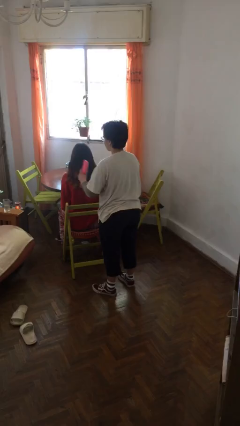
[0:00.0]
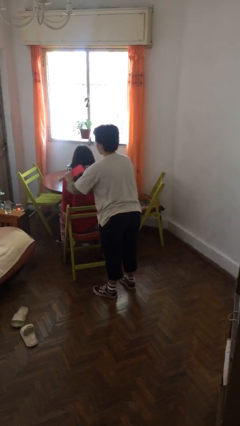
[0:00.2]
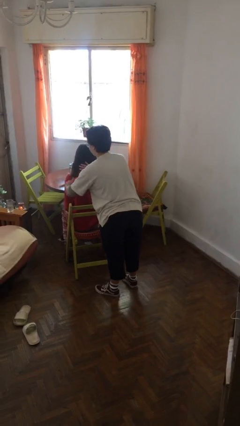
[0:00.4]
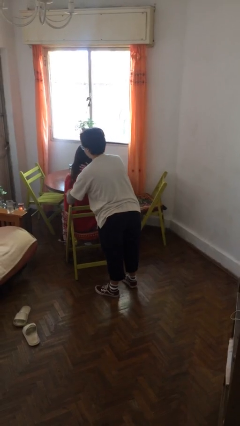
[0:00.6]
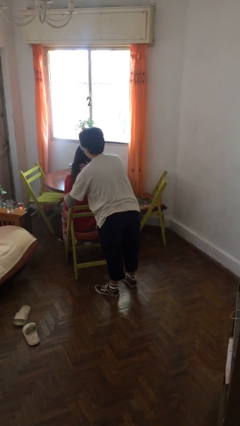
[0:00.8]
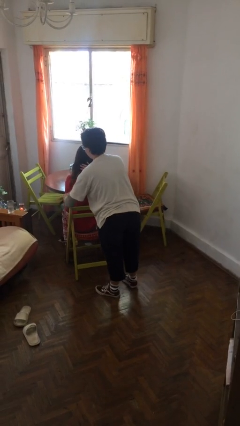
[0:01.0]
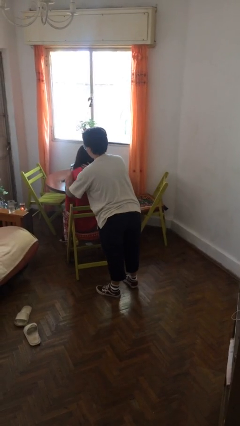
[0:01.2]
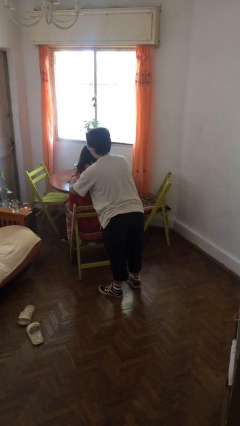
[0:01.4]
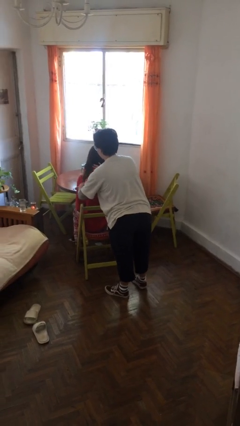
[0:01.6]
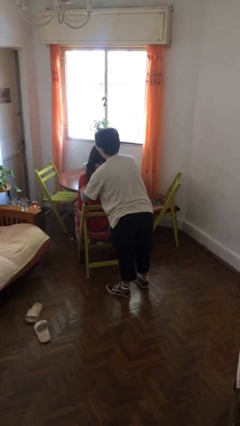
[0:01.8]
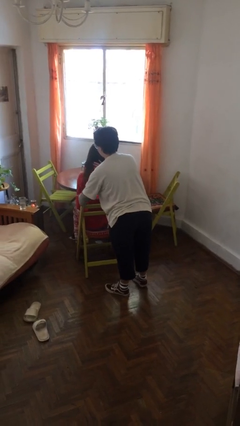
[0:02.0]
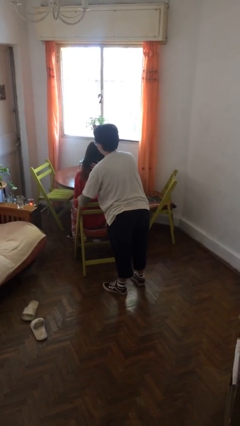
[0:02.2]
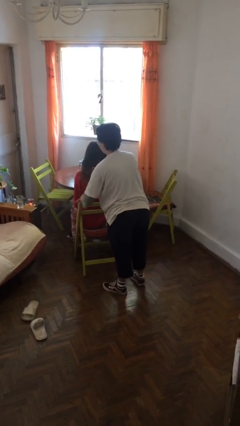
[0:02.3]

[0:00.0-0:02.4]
person brushes hair of person

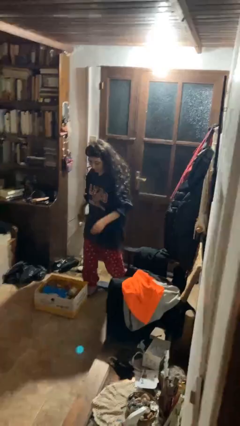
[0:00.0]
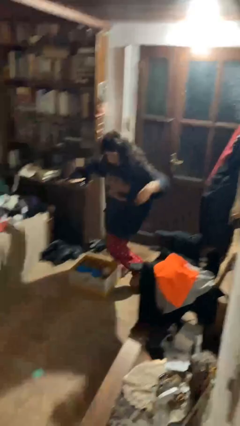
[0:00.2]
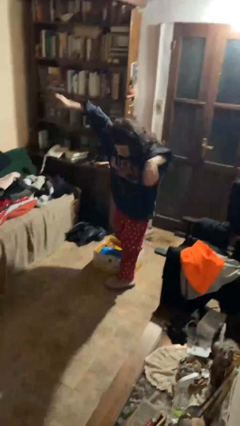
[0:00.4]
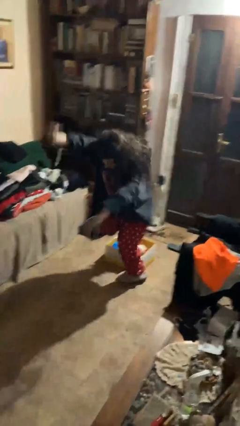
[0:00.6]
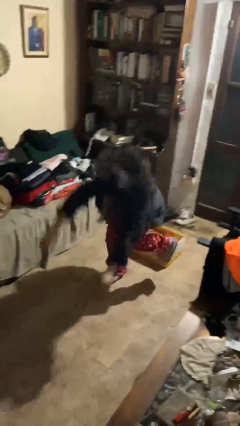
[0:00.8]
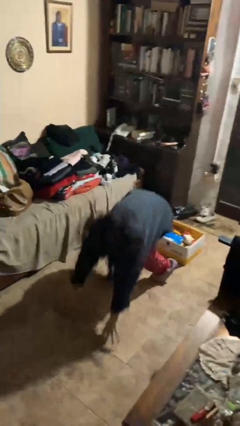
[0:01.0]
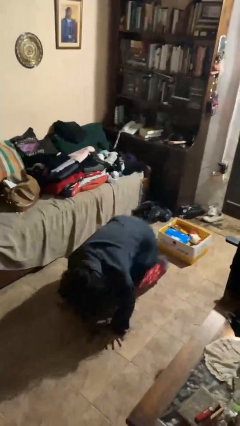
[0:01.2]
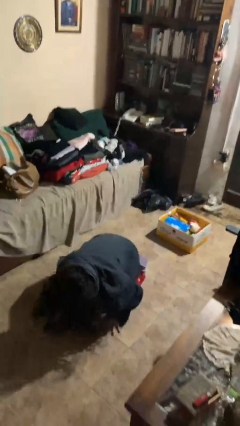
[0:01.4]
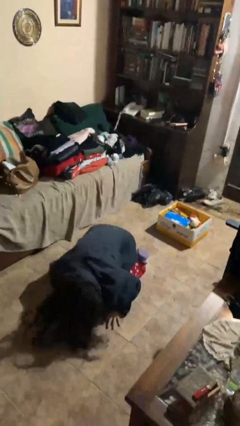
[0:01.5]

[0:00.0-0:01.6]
person trips on object on floor

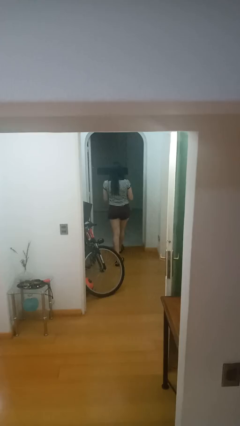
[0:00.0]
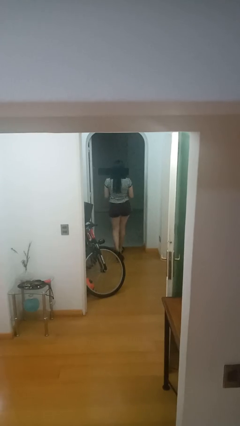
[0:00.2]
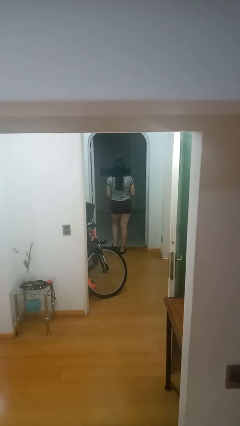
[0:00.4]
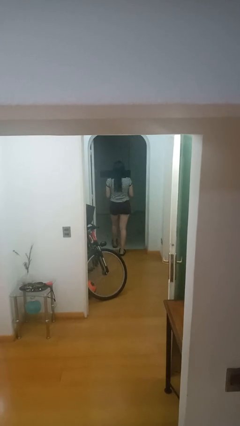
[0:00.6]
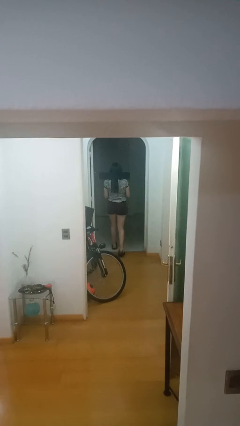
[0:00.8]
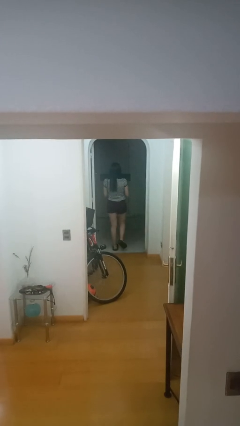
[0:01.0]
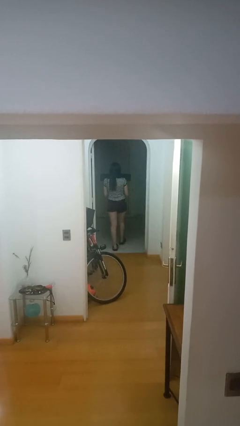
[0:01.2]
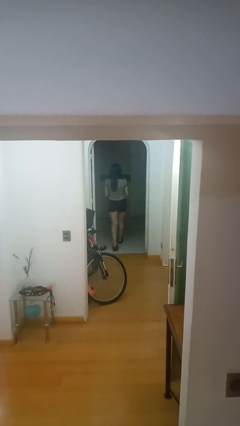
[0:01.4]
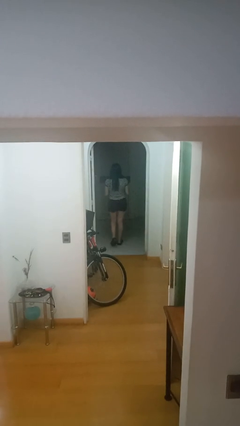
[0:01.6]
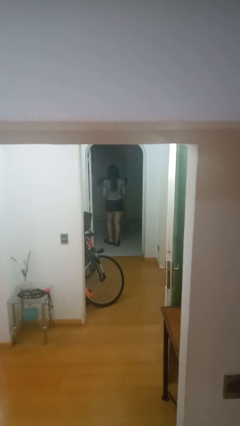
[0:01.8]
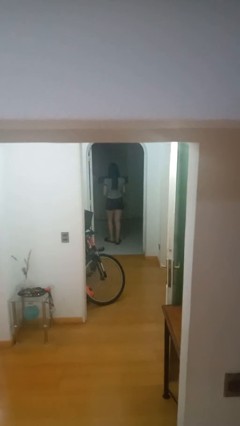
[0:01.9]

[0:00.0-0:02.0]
person exits scene through structure

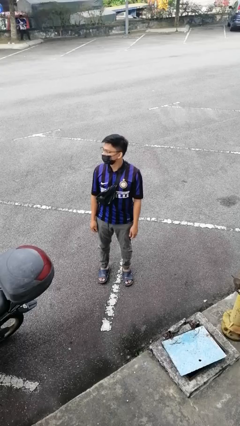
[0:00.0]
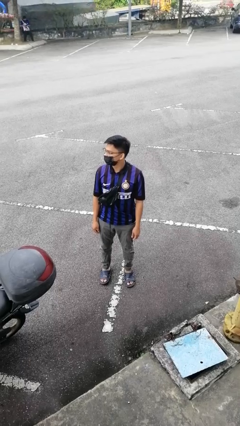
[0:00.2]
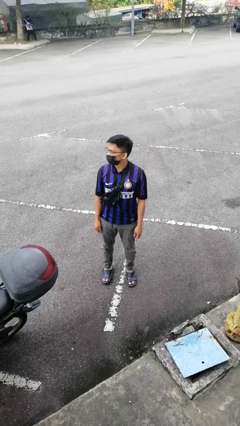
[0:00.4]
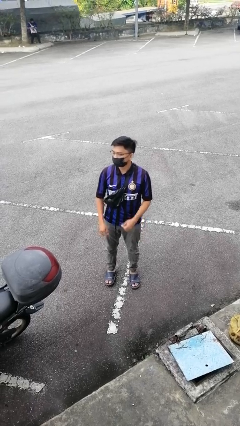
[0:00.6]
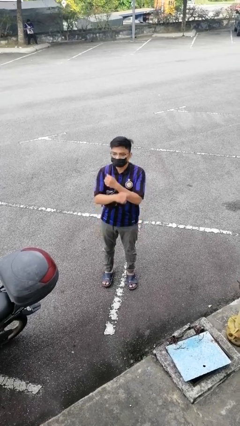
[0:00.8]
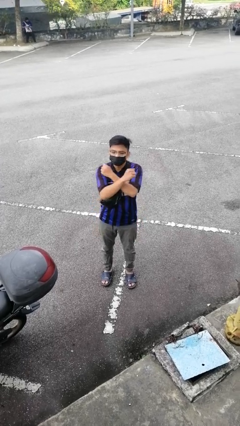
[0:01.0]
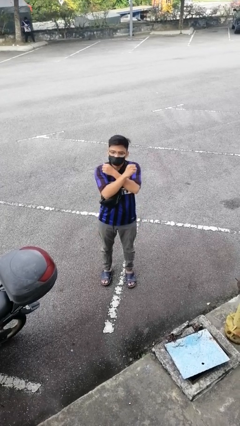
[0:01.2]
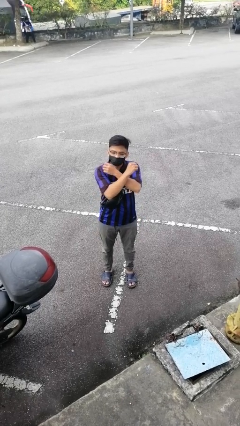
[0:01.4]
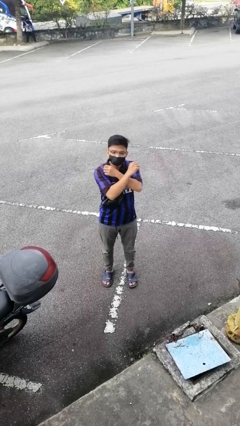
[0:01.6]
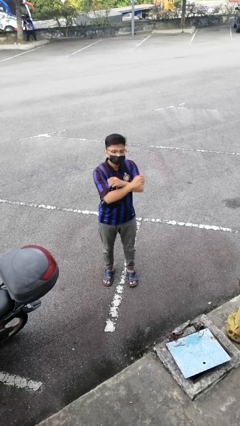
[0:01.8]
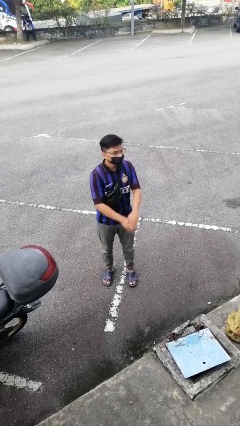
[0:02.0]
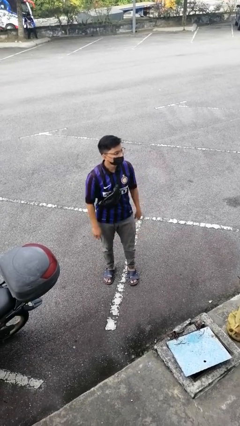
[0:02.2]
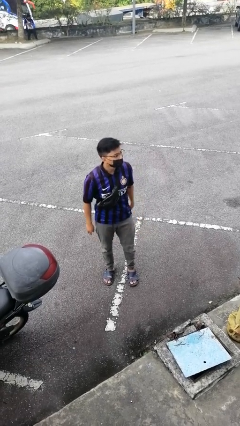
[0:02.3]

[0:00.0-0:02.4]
person gestures arms x

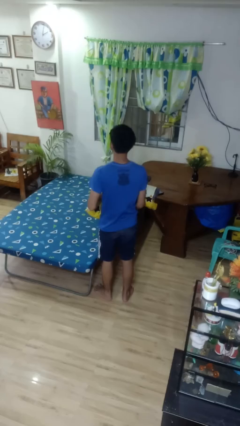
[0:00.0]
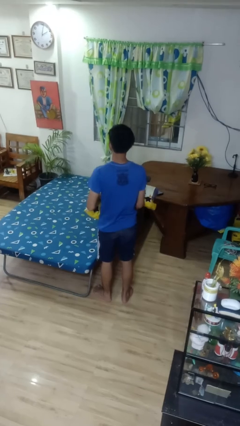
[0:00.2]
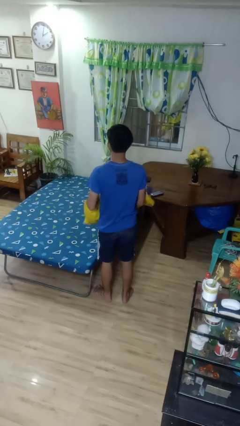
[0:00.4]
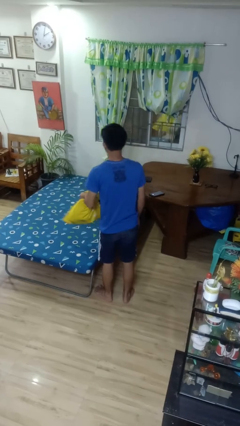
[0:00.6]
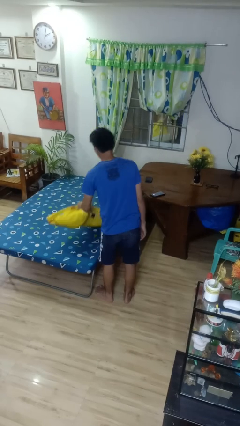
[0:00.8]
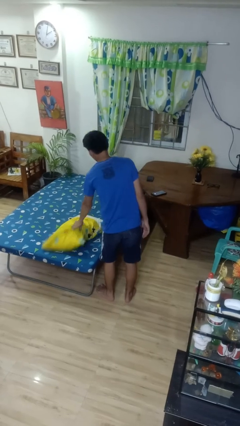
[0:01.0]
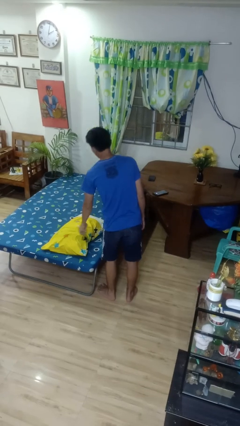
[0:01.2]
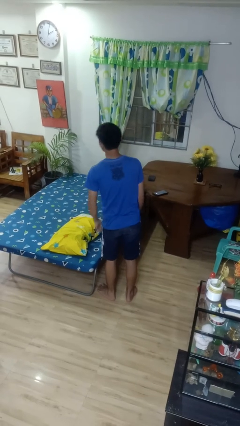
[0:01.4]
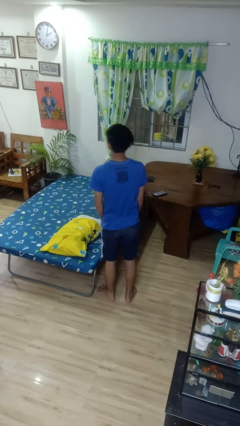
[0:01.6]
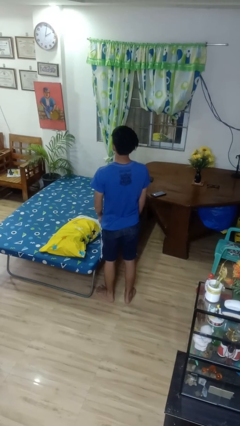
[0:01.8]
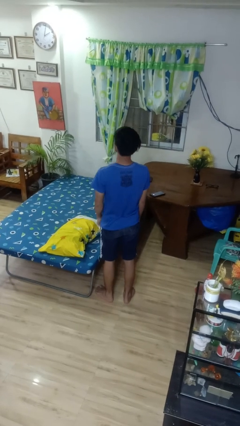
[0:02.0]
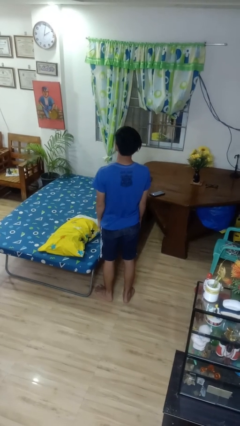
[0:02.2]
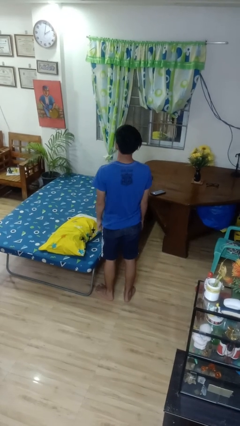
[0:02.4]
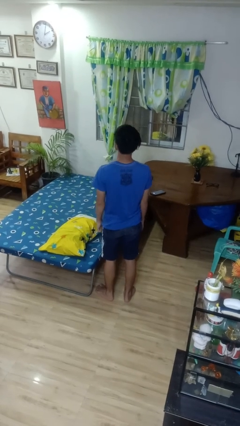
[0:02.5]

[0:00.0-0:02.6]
person puts down object on bed

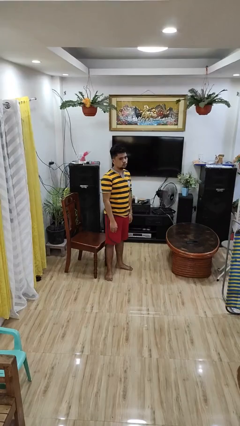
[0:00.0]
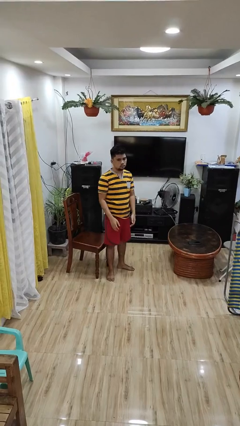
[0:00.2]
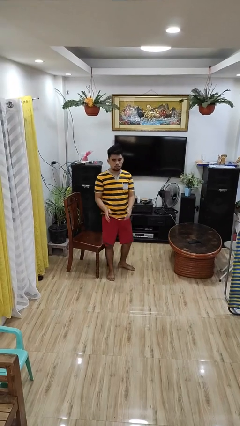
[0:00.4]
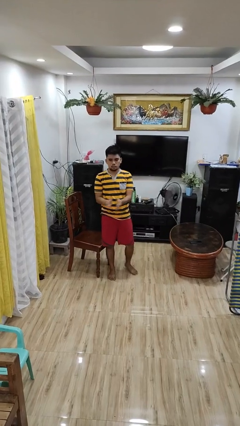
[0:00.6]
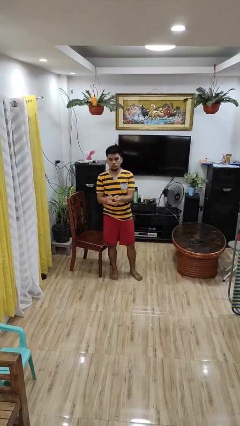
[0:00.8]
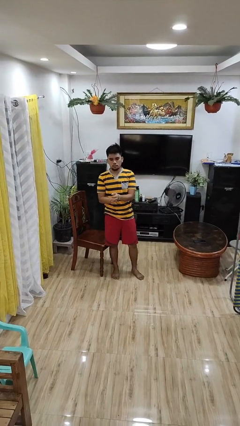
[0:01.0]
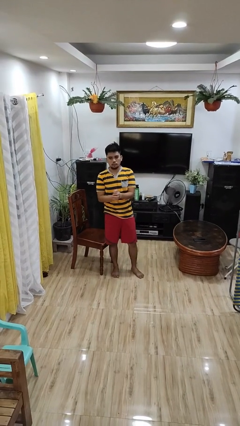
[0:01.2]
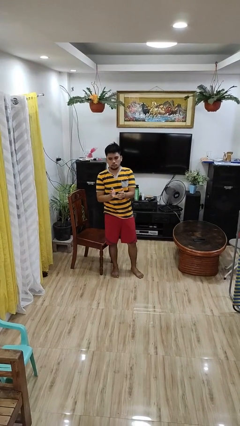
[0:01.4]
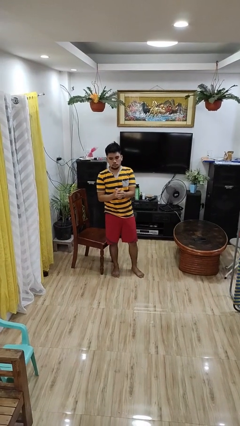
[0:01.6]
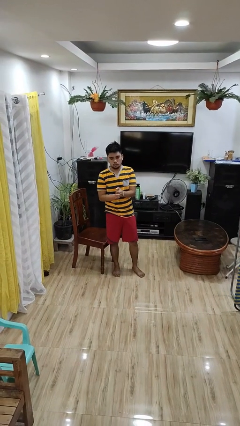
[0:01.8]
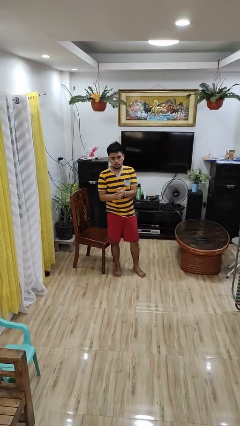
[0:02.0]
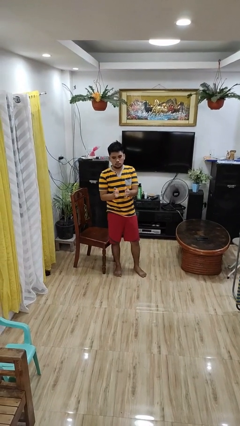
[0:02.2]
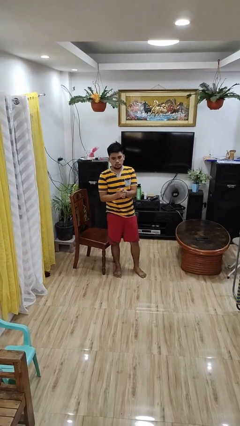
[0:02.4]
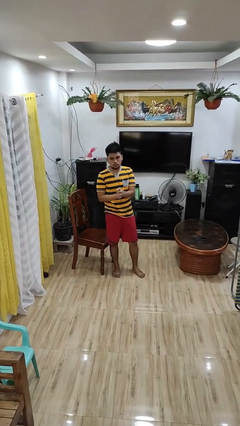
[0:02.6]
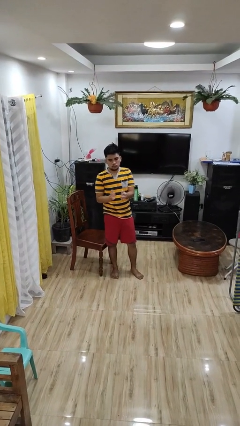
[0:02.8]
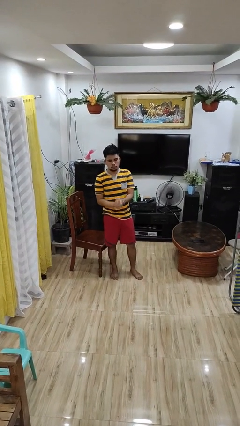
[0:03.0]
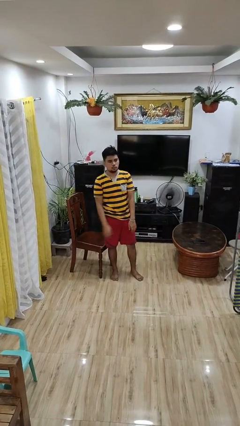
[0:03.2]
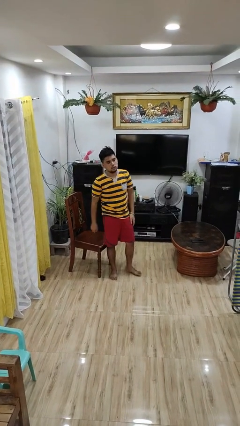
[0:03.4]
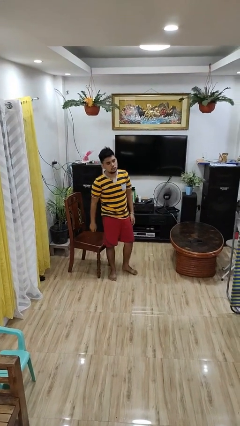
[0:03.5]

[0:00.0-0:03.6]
person claps hands

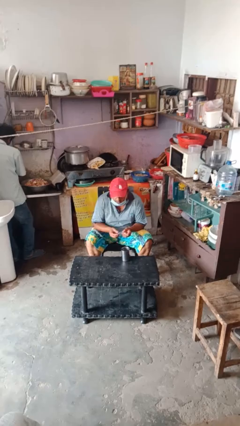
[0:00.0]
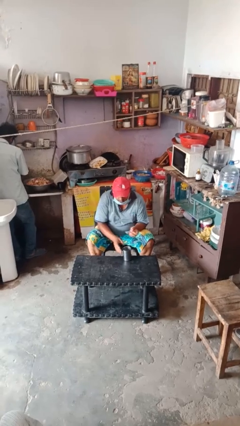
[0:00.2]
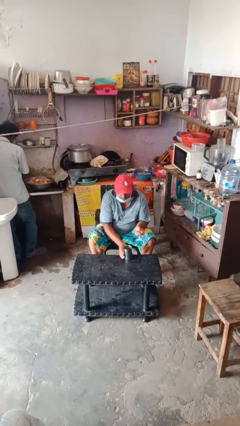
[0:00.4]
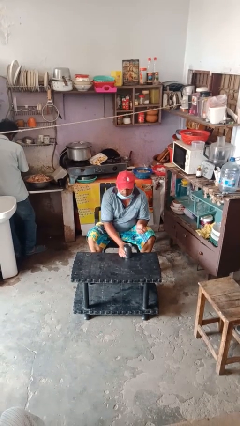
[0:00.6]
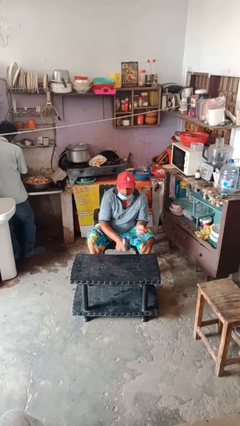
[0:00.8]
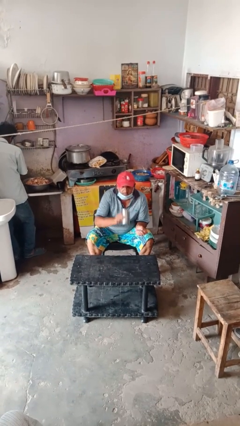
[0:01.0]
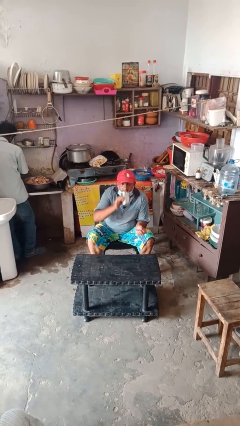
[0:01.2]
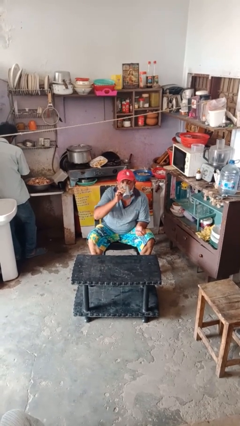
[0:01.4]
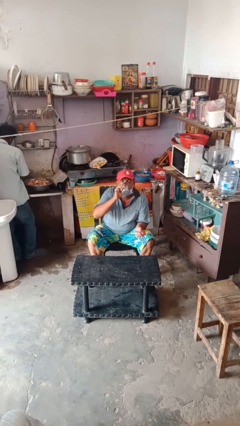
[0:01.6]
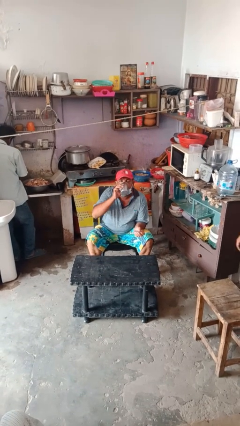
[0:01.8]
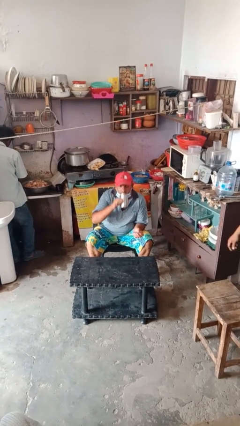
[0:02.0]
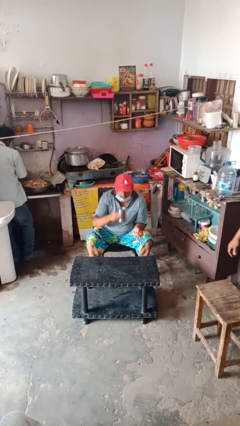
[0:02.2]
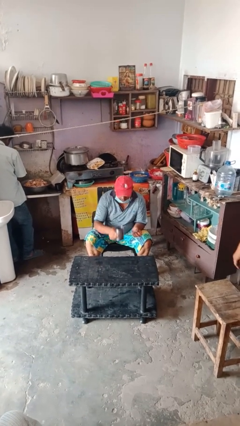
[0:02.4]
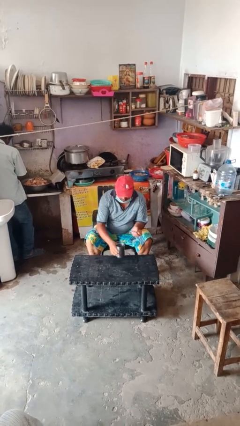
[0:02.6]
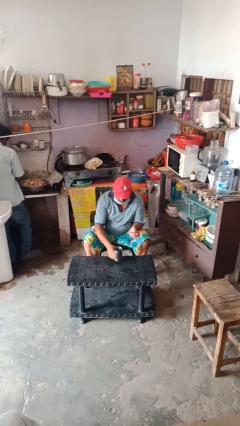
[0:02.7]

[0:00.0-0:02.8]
person drinks from cup
